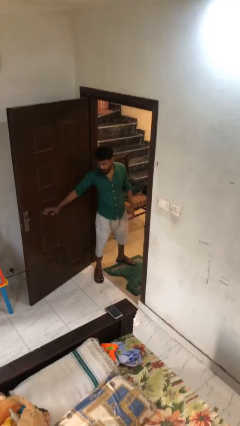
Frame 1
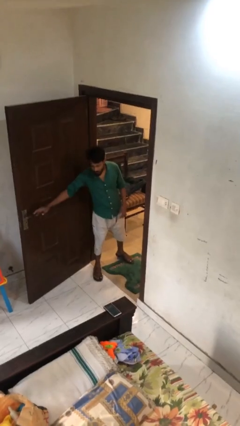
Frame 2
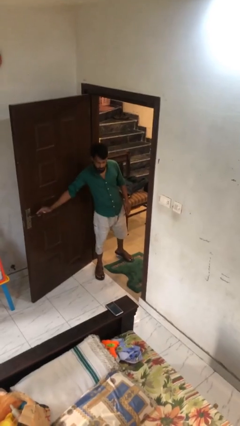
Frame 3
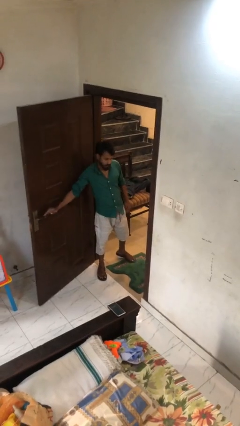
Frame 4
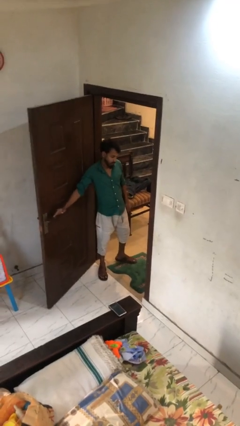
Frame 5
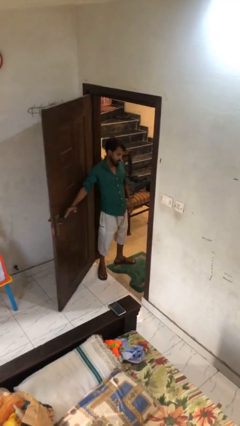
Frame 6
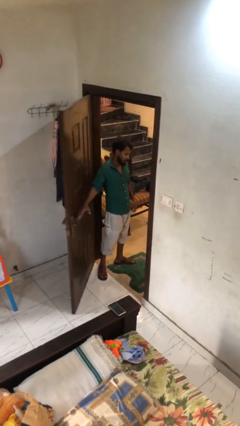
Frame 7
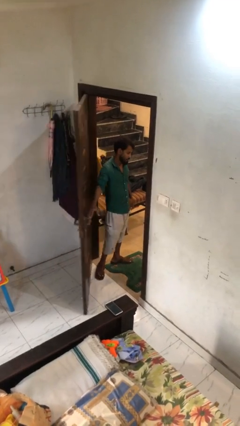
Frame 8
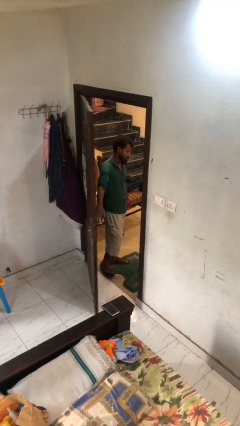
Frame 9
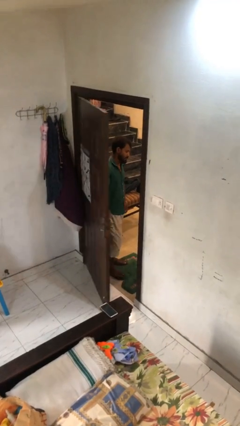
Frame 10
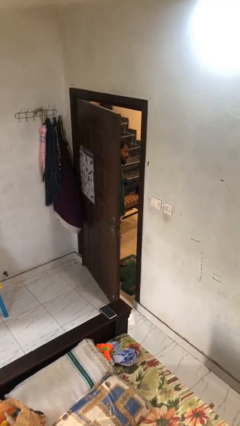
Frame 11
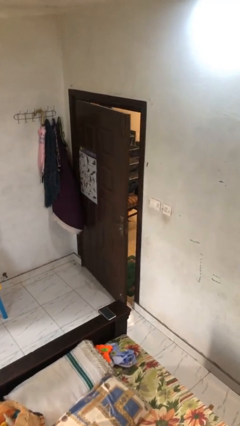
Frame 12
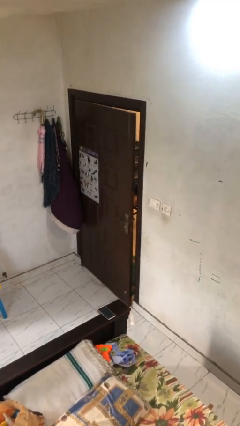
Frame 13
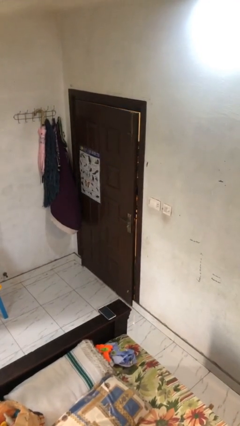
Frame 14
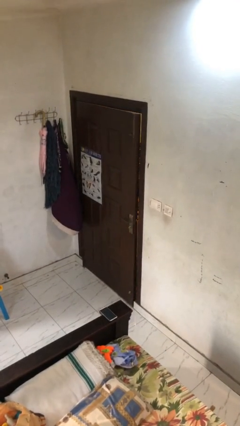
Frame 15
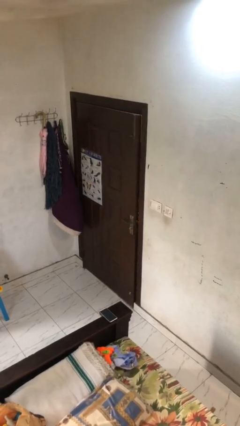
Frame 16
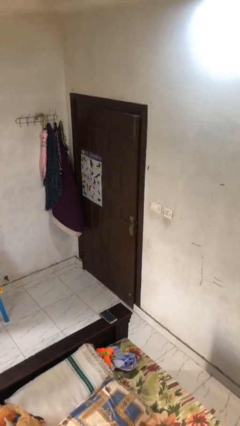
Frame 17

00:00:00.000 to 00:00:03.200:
person closes facility door

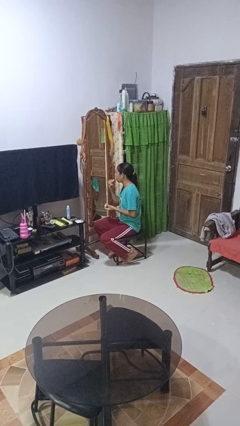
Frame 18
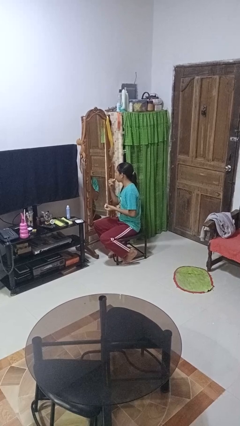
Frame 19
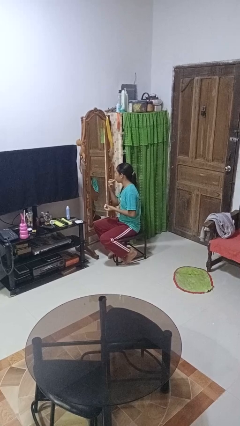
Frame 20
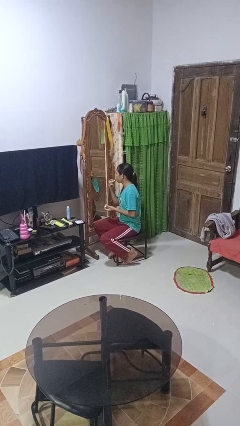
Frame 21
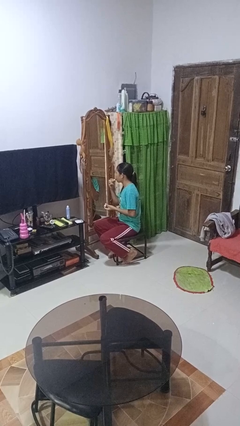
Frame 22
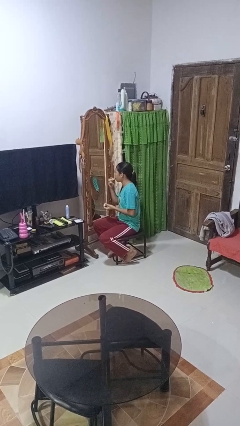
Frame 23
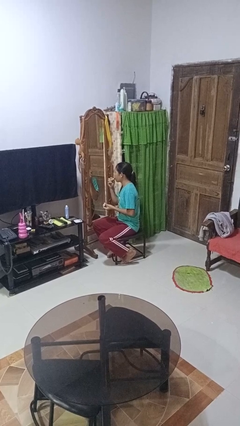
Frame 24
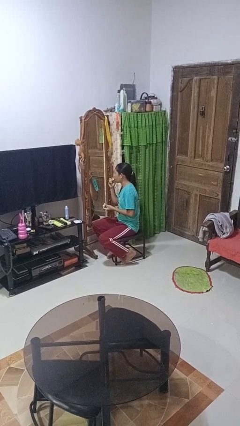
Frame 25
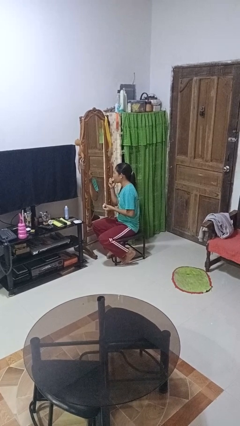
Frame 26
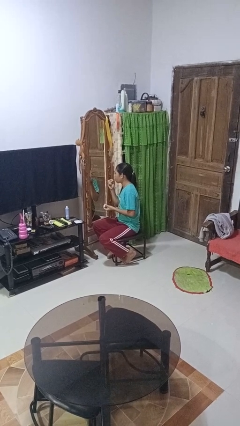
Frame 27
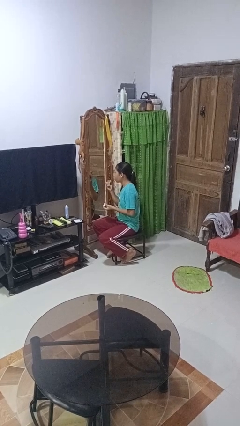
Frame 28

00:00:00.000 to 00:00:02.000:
person applies lip makeup

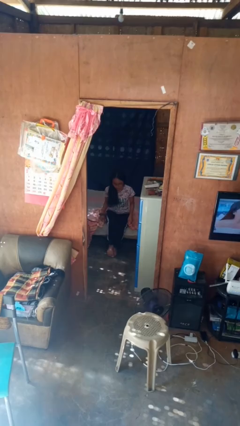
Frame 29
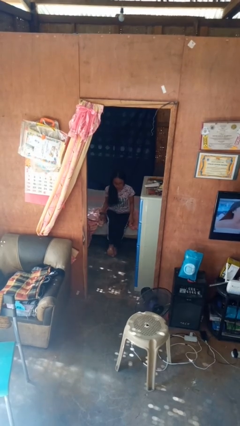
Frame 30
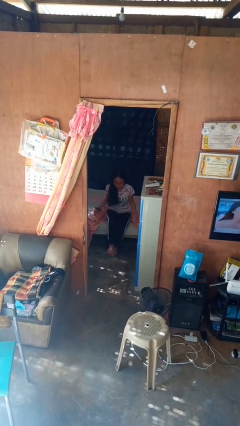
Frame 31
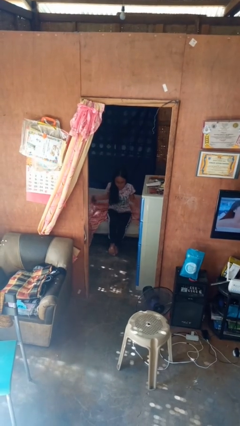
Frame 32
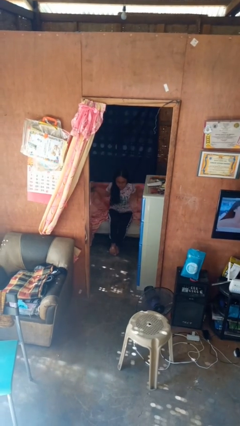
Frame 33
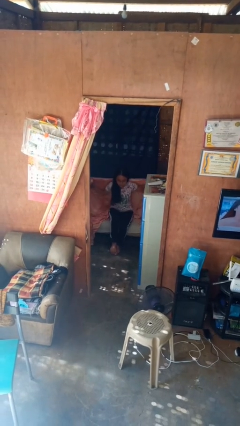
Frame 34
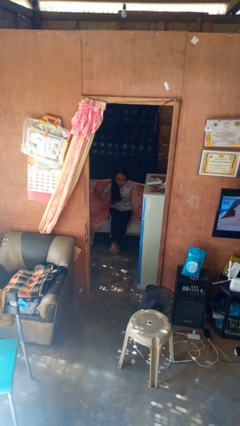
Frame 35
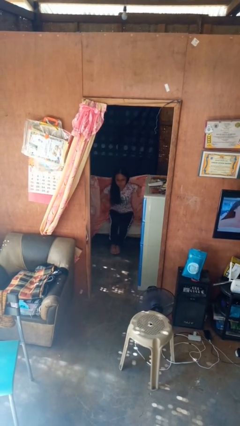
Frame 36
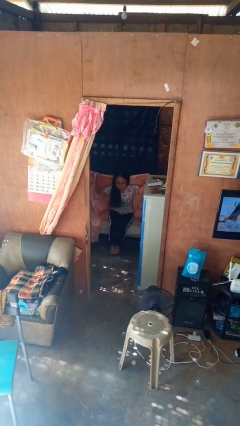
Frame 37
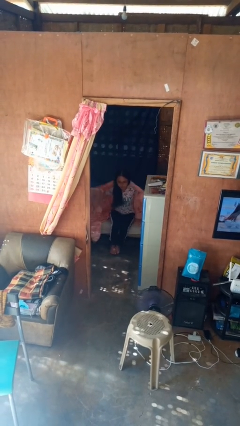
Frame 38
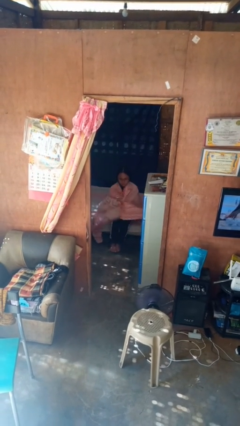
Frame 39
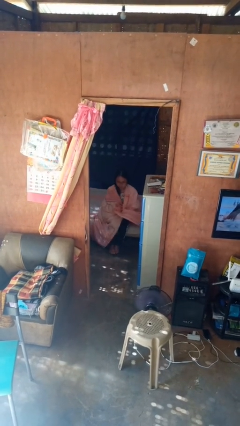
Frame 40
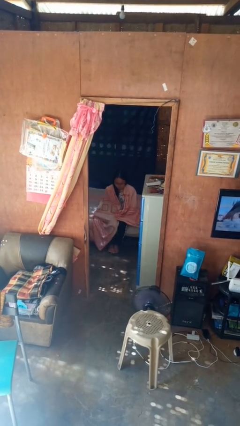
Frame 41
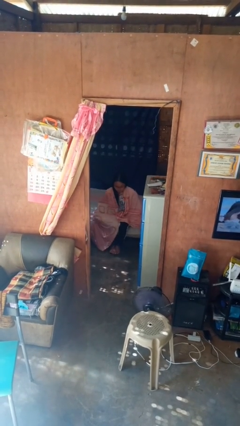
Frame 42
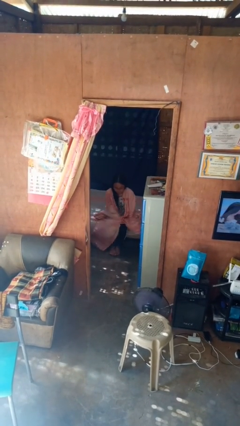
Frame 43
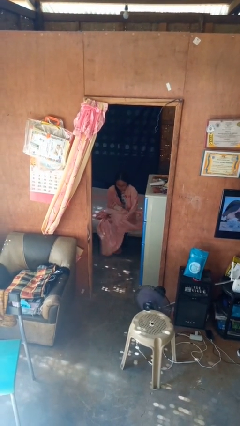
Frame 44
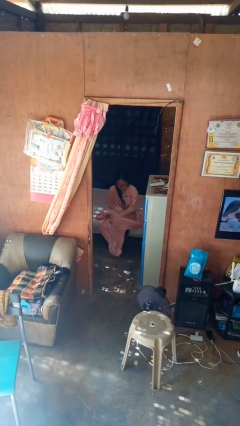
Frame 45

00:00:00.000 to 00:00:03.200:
person covers with blanket

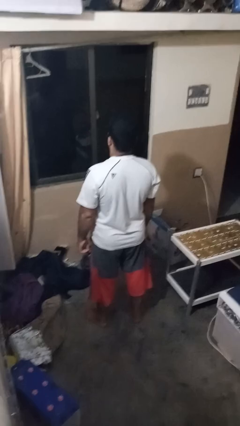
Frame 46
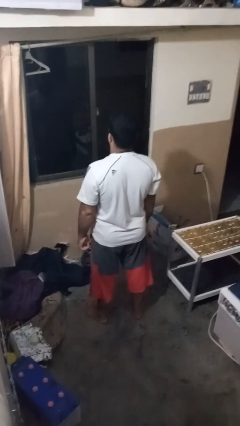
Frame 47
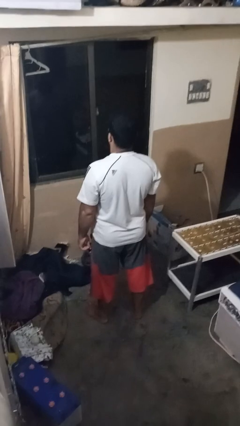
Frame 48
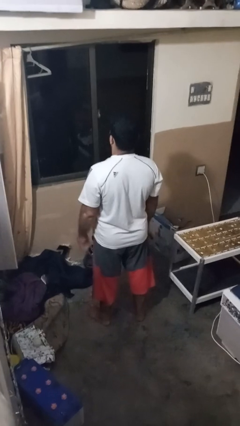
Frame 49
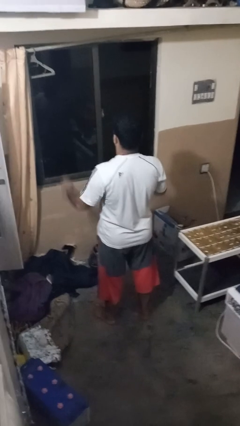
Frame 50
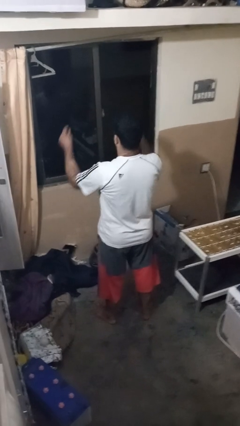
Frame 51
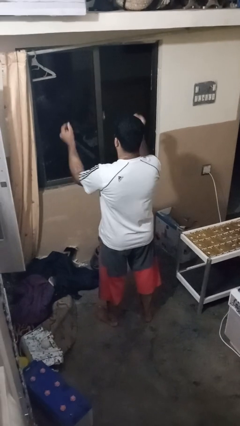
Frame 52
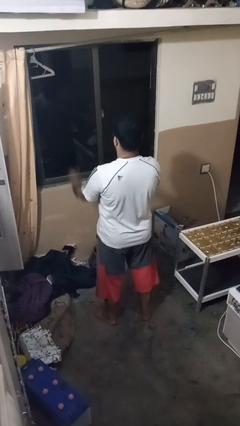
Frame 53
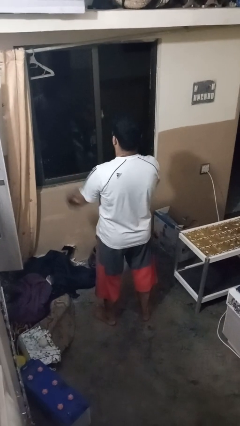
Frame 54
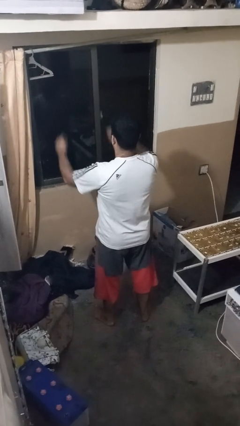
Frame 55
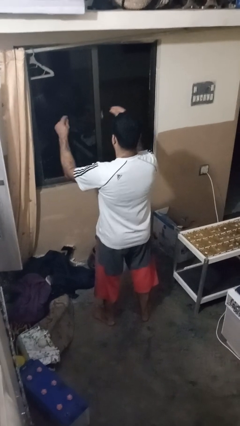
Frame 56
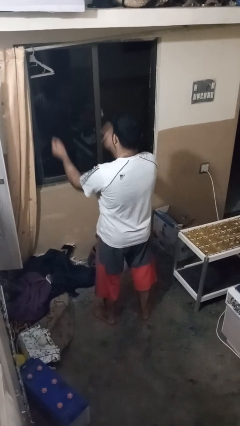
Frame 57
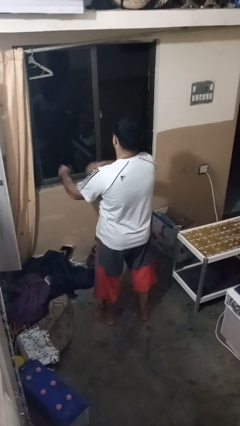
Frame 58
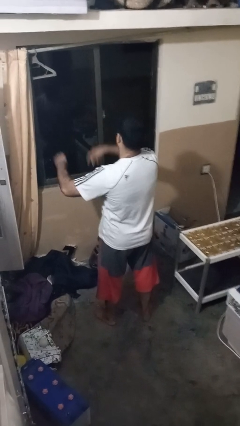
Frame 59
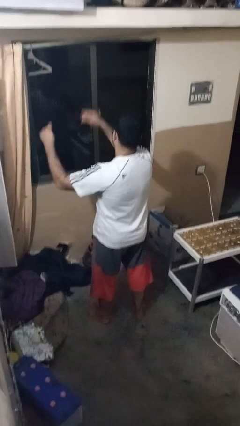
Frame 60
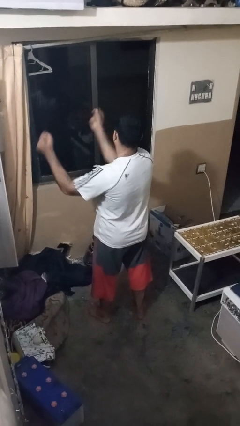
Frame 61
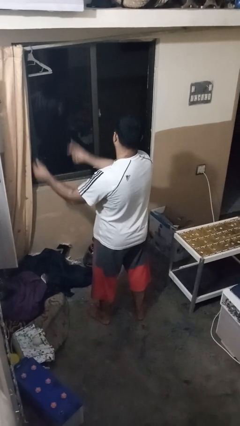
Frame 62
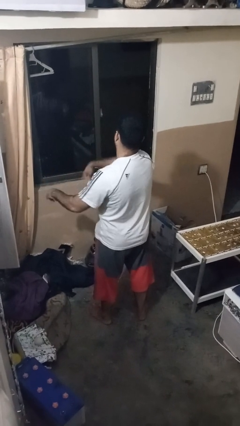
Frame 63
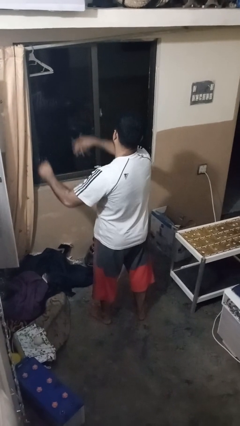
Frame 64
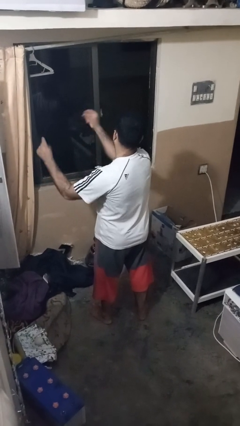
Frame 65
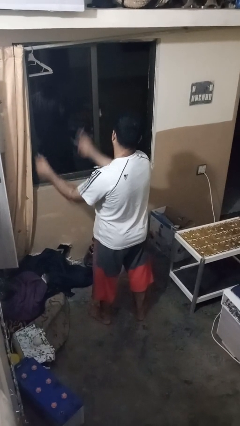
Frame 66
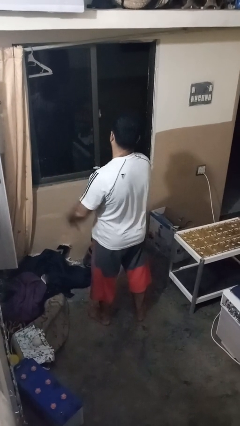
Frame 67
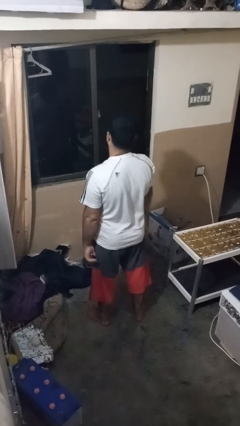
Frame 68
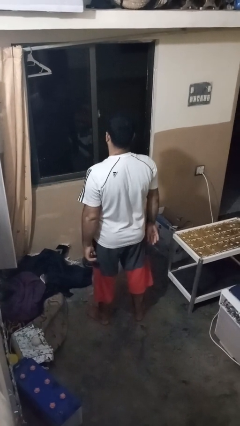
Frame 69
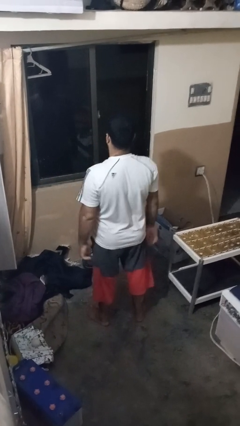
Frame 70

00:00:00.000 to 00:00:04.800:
person snaps fingers

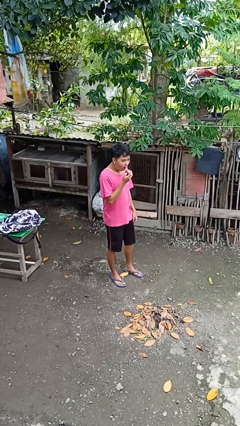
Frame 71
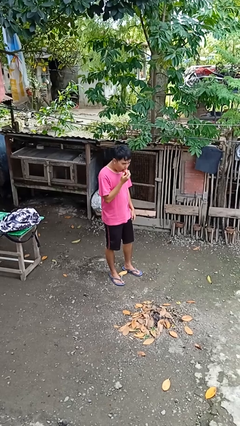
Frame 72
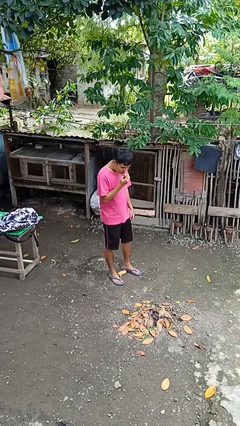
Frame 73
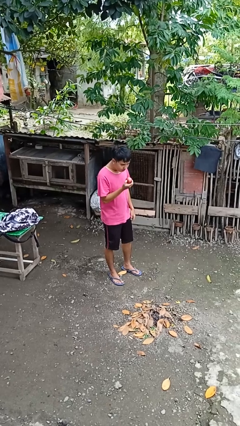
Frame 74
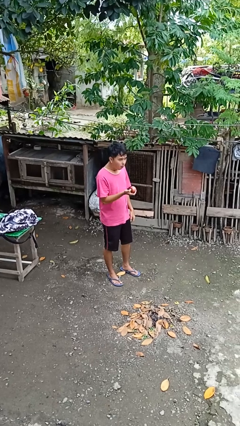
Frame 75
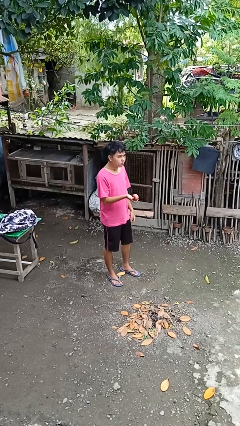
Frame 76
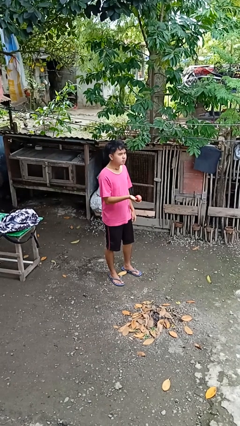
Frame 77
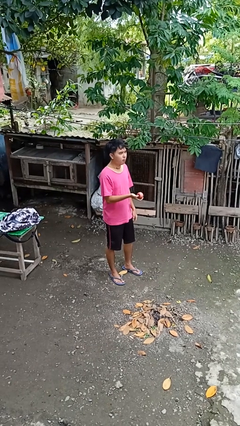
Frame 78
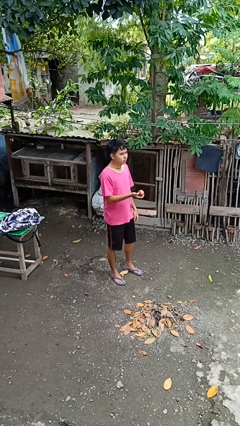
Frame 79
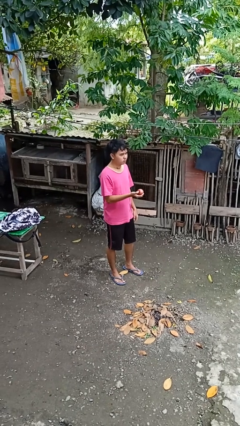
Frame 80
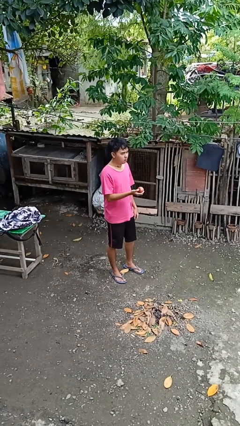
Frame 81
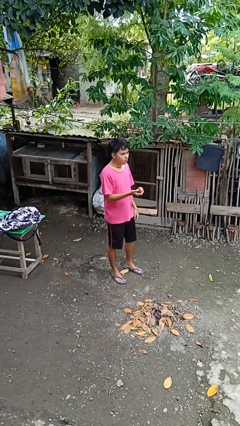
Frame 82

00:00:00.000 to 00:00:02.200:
person eats apple

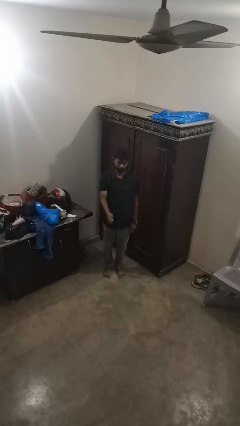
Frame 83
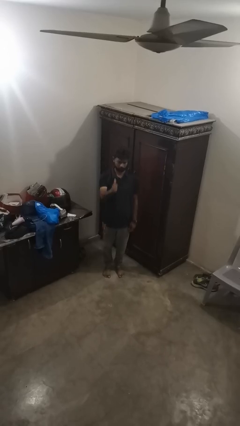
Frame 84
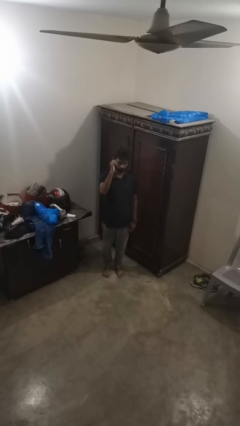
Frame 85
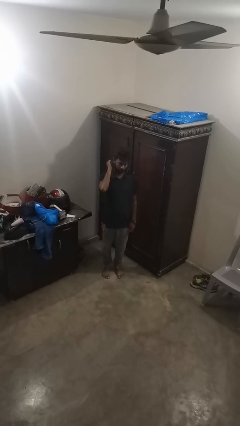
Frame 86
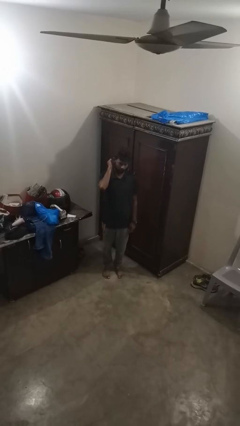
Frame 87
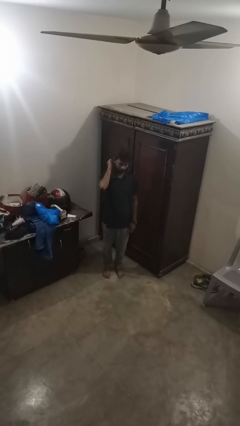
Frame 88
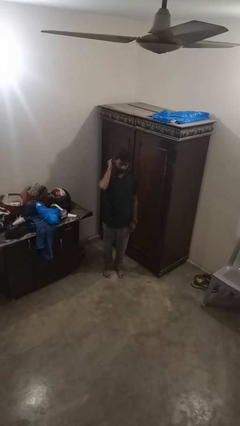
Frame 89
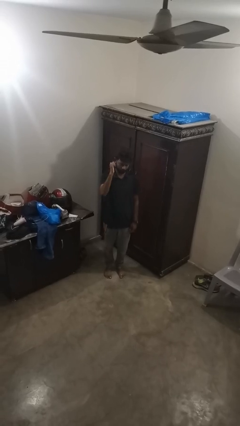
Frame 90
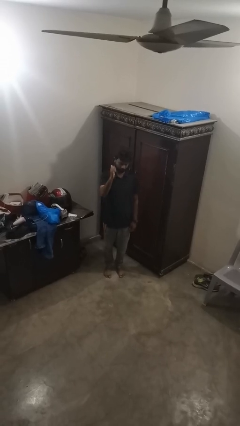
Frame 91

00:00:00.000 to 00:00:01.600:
person gestures behind me

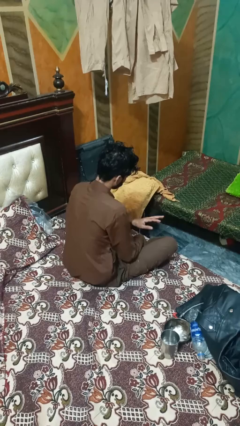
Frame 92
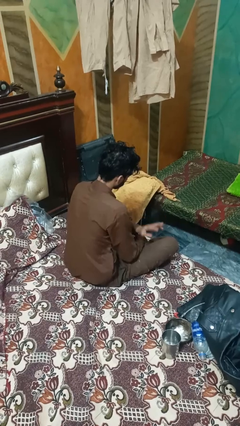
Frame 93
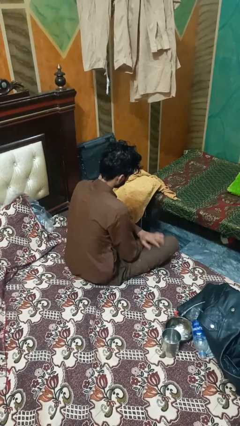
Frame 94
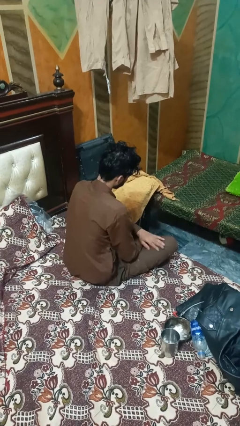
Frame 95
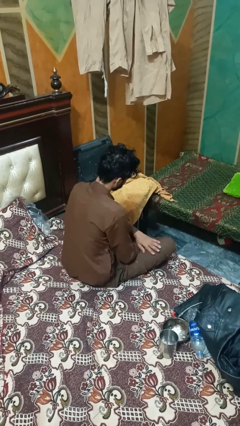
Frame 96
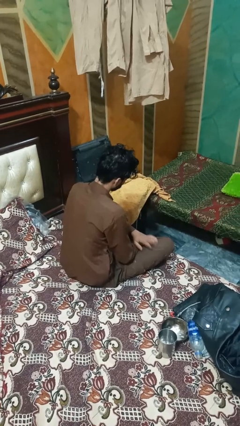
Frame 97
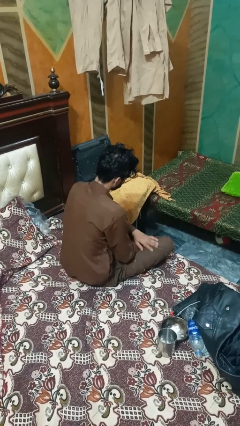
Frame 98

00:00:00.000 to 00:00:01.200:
person slaps hands on thighs
